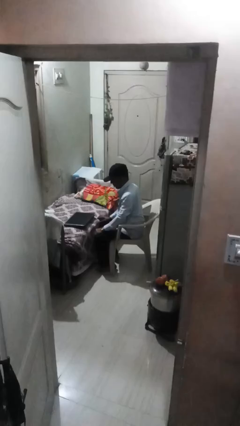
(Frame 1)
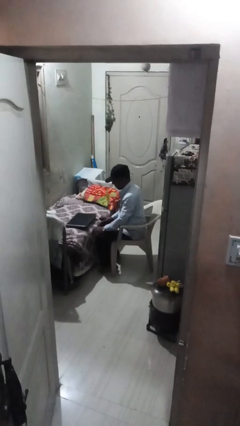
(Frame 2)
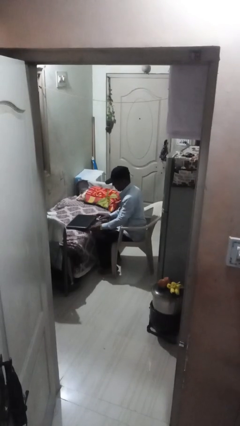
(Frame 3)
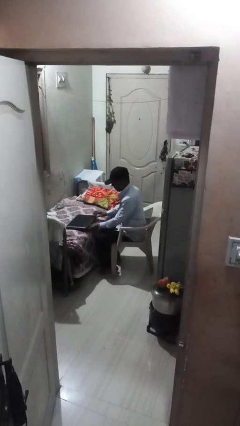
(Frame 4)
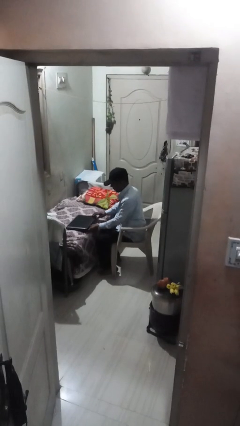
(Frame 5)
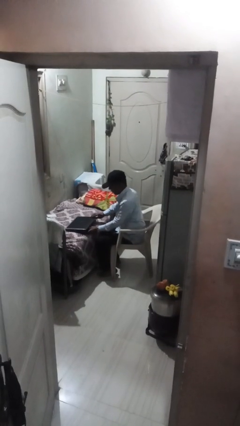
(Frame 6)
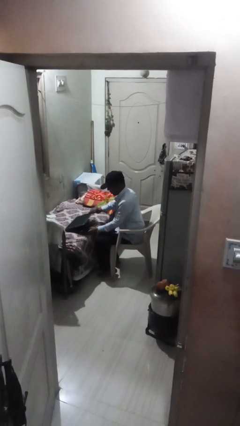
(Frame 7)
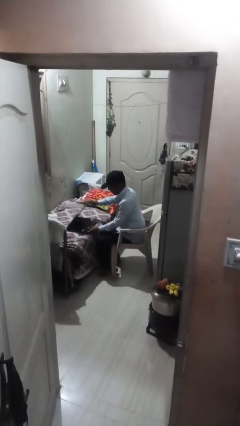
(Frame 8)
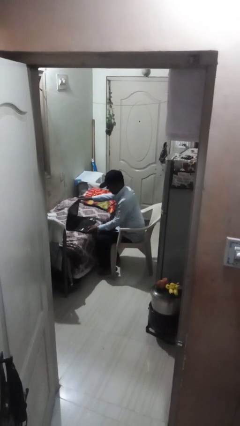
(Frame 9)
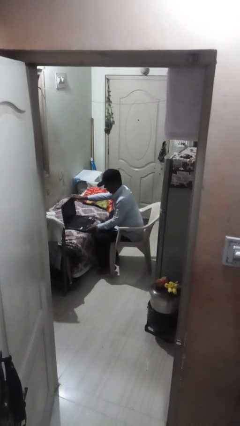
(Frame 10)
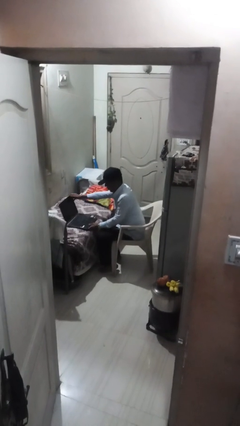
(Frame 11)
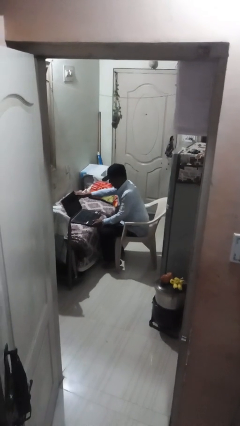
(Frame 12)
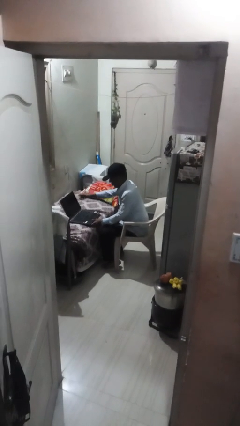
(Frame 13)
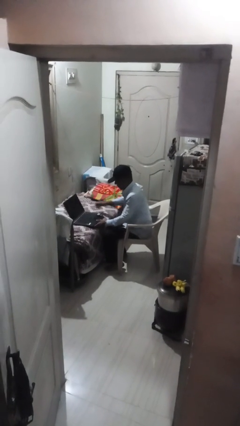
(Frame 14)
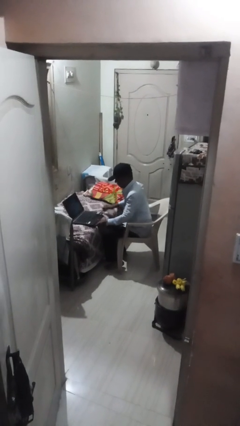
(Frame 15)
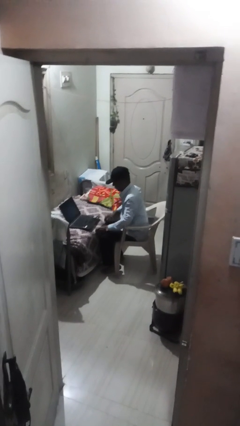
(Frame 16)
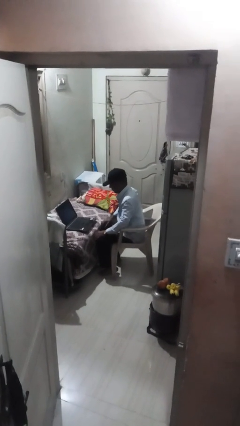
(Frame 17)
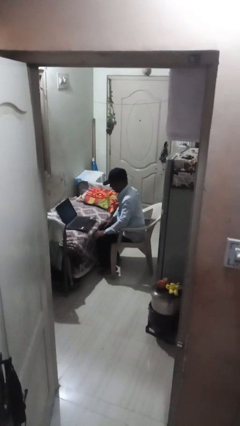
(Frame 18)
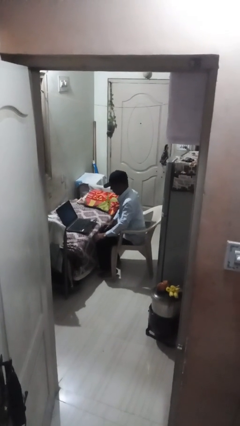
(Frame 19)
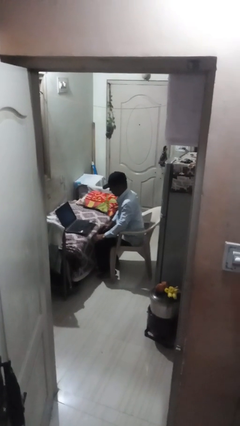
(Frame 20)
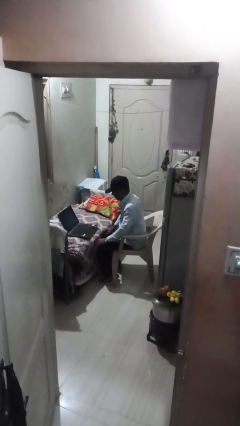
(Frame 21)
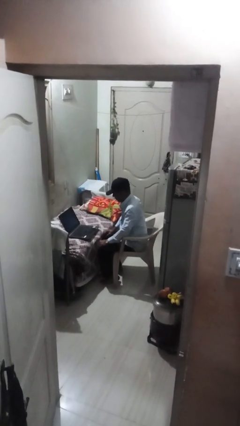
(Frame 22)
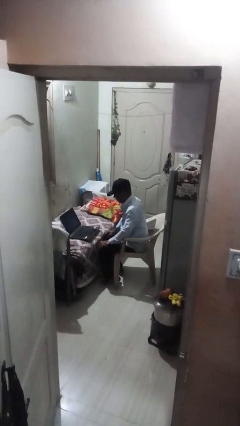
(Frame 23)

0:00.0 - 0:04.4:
person opens laptop

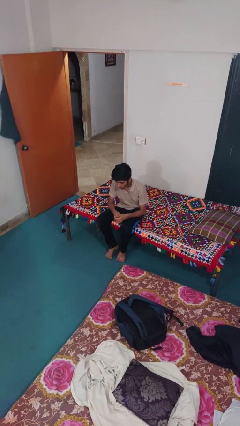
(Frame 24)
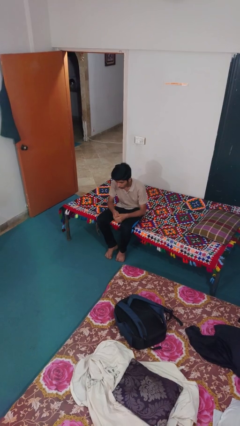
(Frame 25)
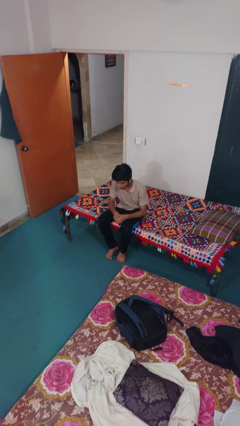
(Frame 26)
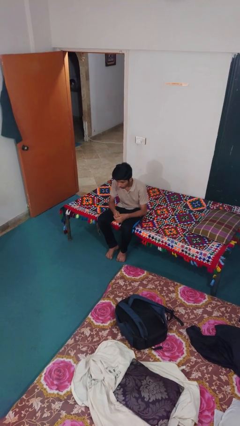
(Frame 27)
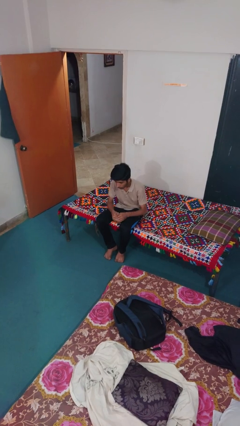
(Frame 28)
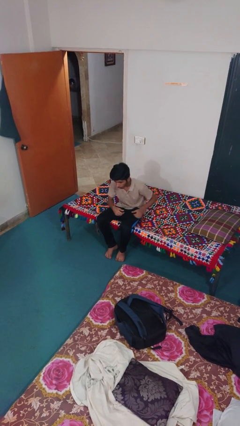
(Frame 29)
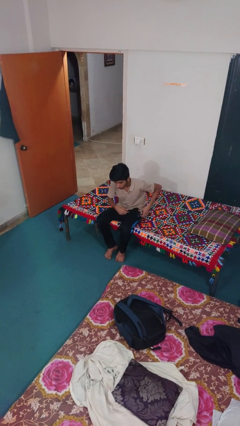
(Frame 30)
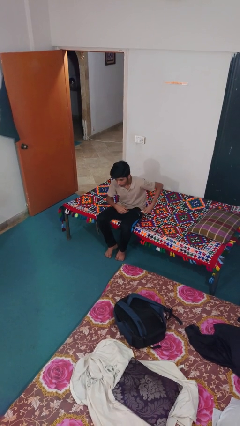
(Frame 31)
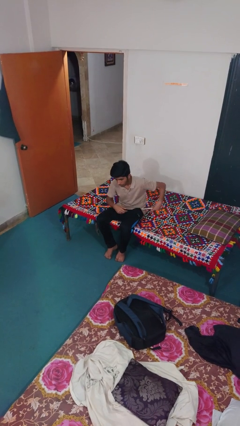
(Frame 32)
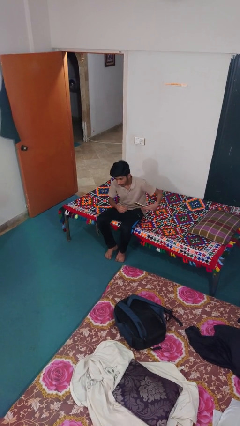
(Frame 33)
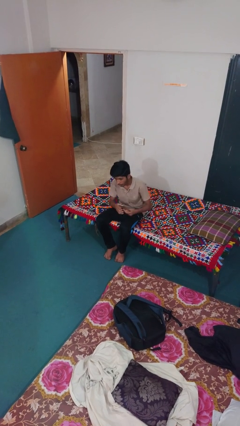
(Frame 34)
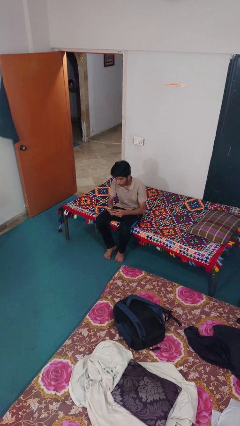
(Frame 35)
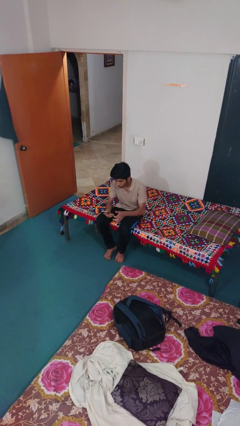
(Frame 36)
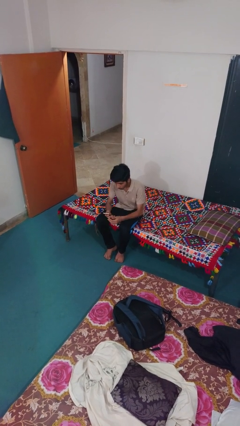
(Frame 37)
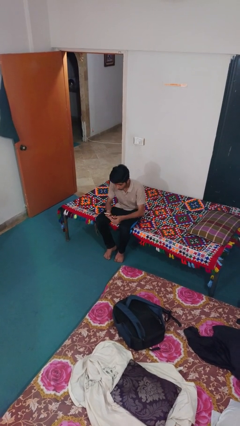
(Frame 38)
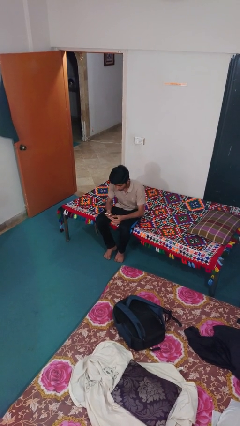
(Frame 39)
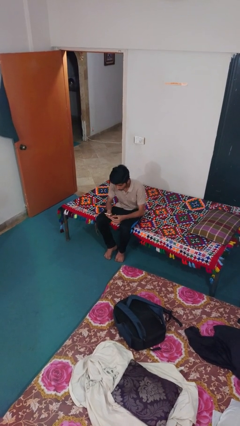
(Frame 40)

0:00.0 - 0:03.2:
person takes phone from pocket

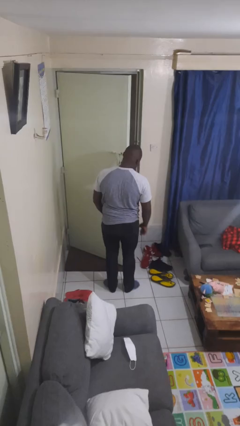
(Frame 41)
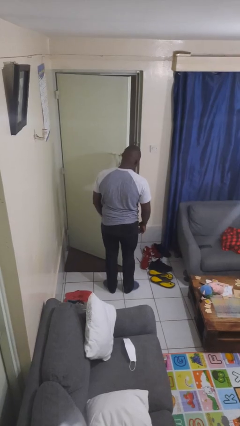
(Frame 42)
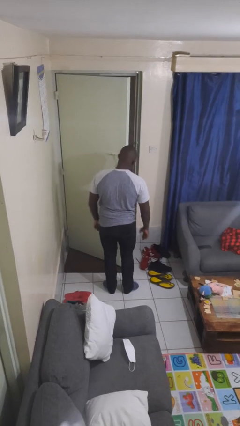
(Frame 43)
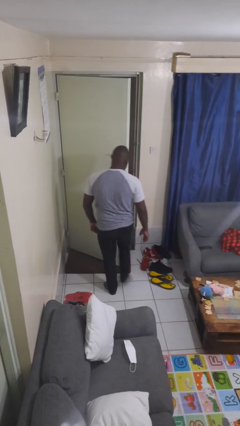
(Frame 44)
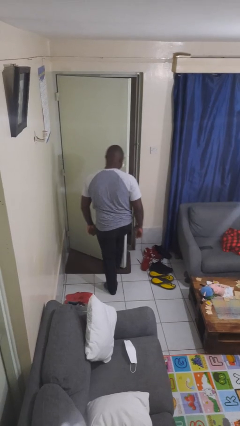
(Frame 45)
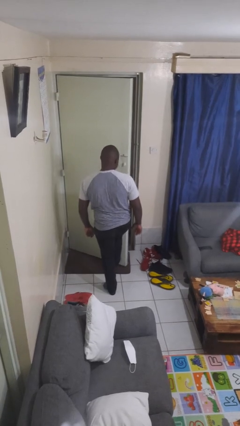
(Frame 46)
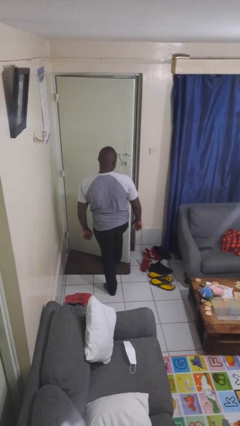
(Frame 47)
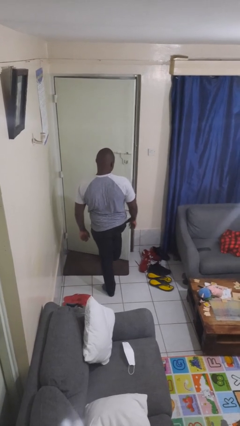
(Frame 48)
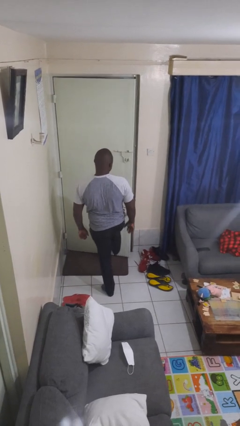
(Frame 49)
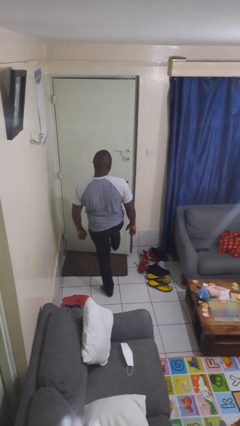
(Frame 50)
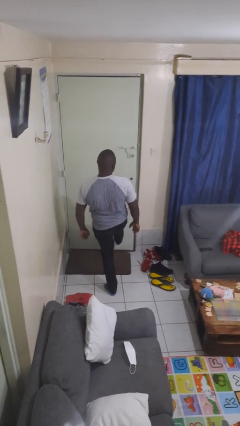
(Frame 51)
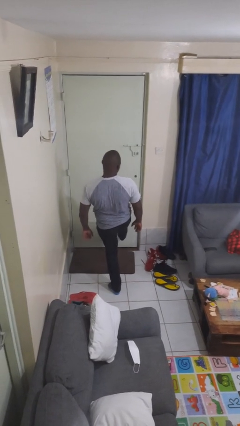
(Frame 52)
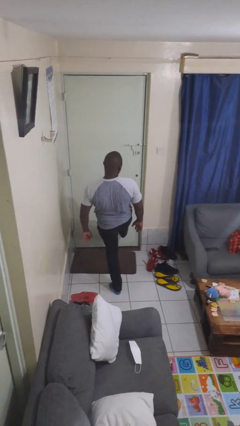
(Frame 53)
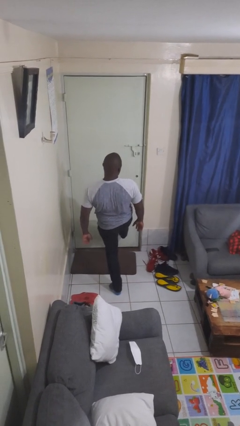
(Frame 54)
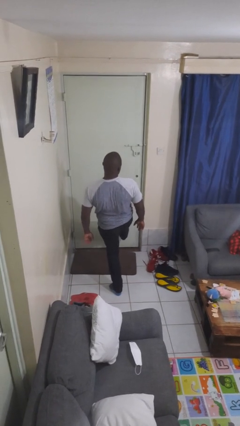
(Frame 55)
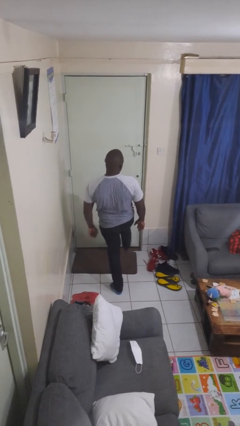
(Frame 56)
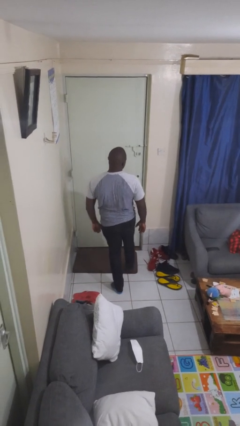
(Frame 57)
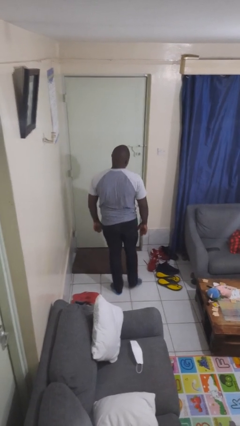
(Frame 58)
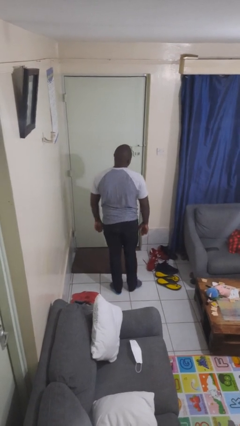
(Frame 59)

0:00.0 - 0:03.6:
person closes door with foot

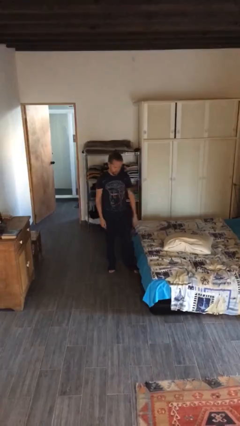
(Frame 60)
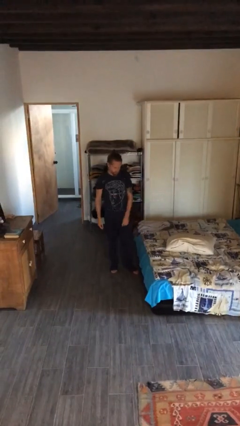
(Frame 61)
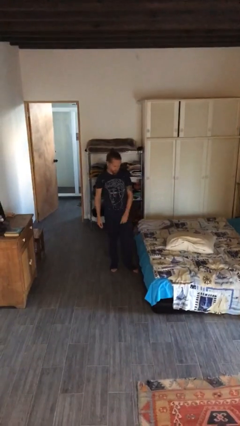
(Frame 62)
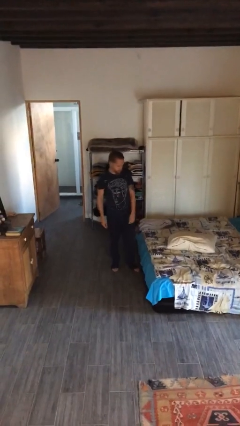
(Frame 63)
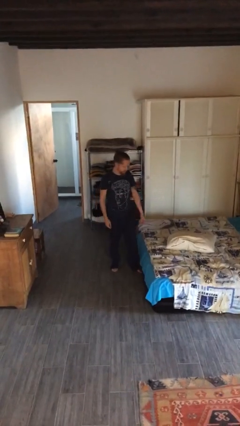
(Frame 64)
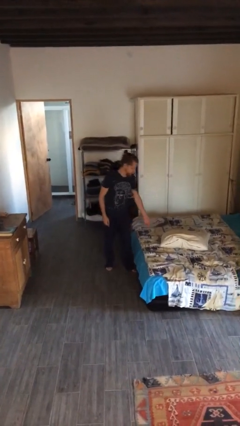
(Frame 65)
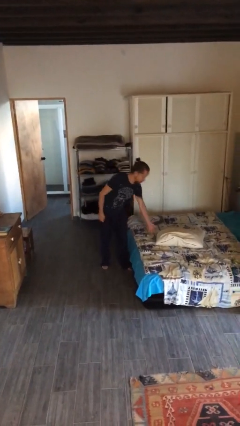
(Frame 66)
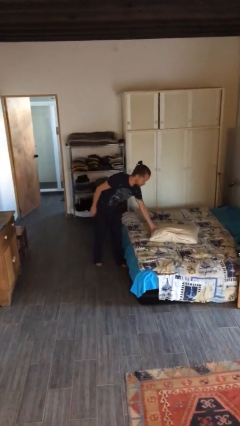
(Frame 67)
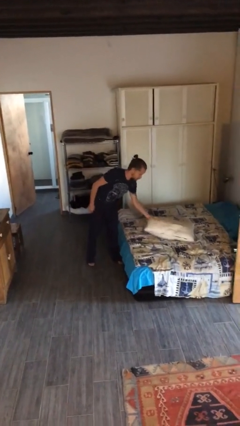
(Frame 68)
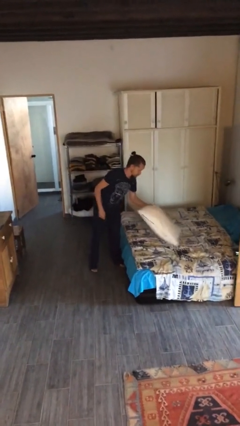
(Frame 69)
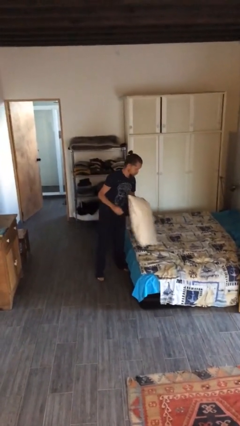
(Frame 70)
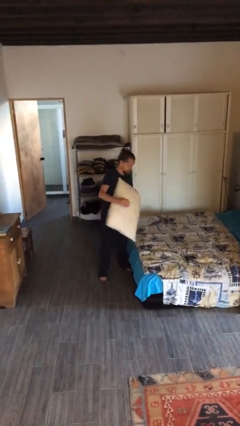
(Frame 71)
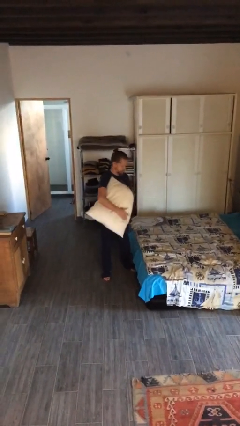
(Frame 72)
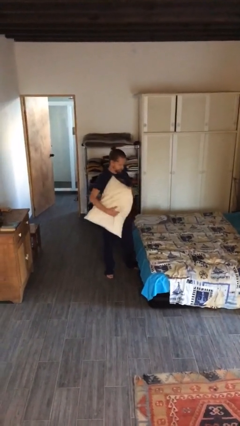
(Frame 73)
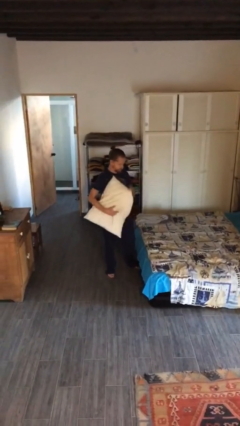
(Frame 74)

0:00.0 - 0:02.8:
person picks up object from bed

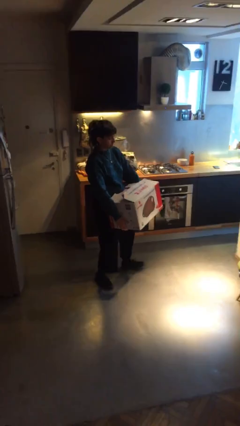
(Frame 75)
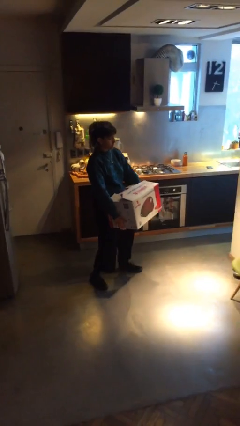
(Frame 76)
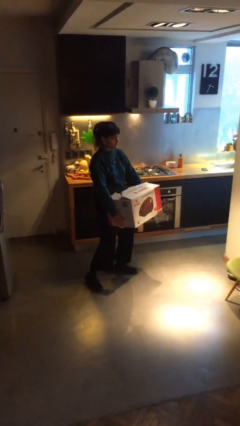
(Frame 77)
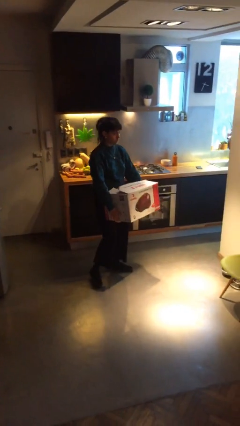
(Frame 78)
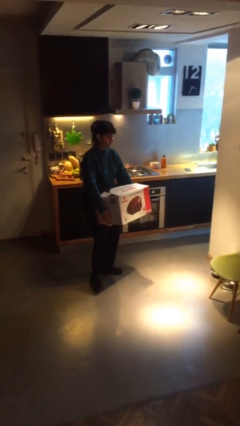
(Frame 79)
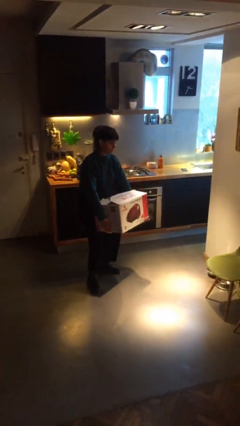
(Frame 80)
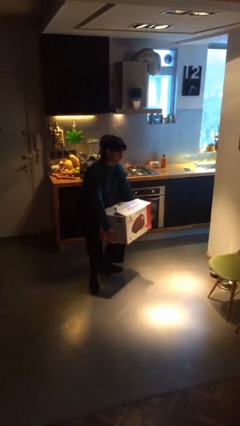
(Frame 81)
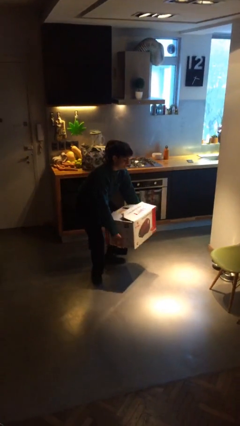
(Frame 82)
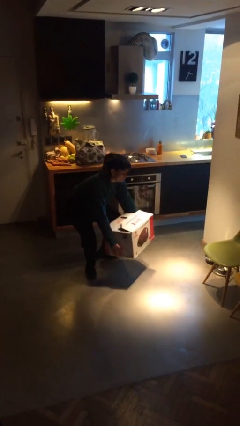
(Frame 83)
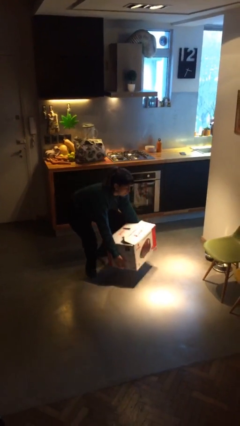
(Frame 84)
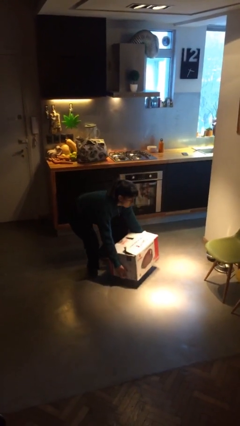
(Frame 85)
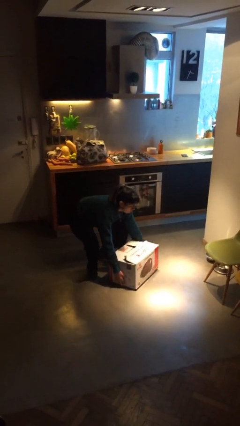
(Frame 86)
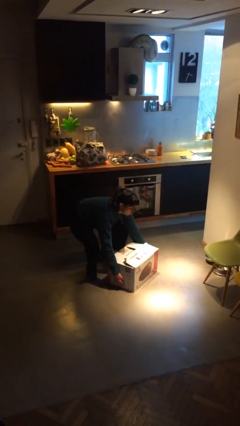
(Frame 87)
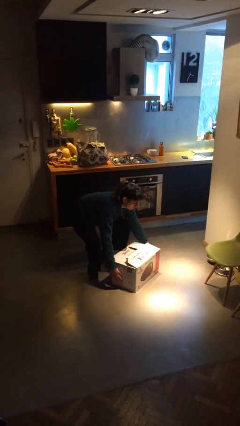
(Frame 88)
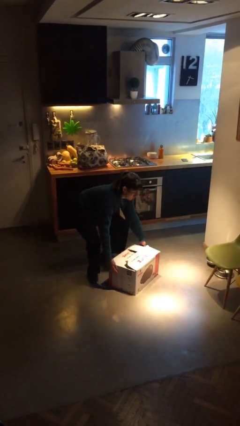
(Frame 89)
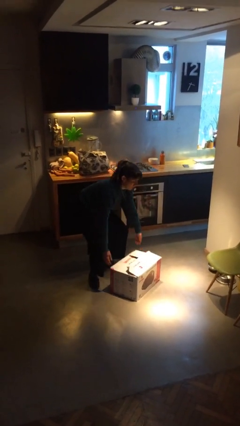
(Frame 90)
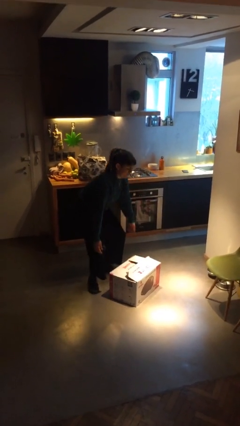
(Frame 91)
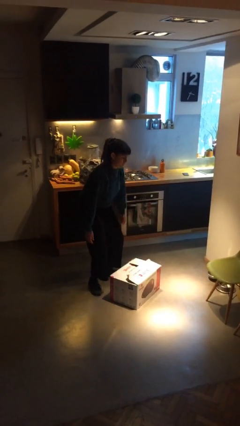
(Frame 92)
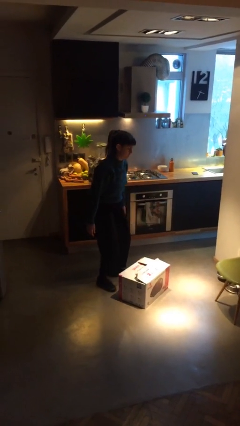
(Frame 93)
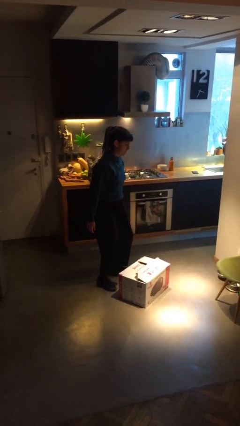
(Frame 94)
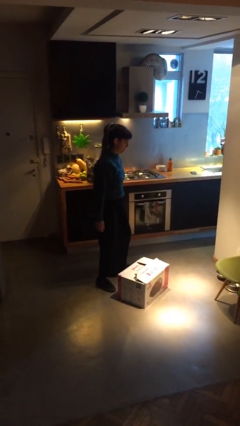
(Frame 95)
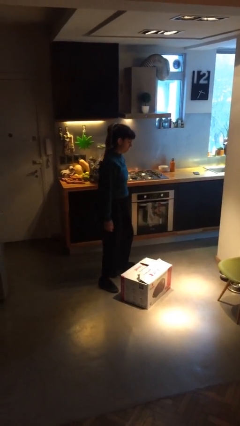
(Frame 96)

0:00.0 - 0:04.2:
person puts down object on floor
